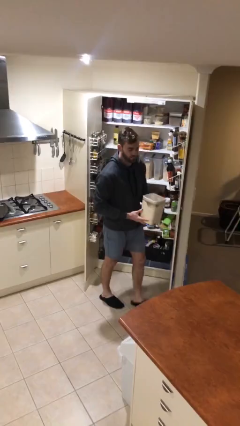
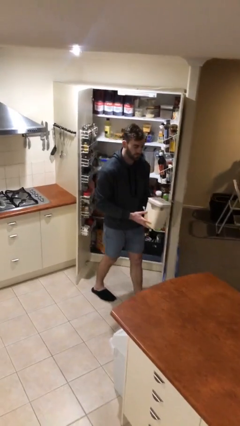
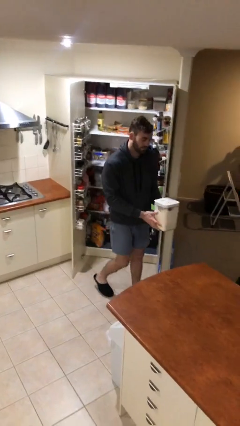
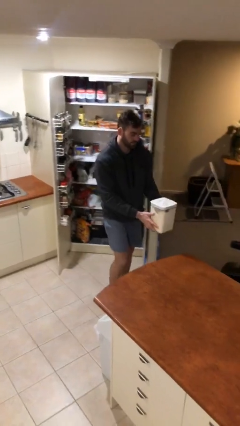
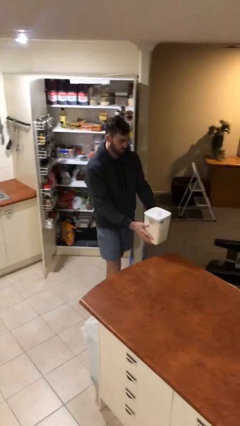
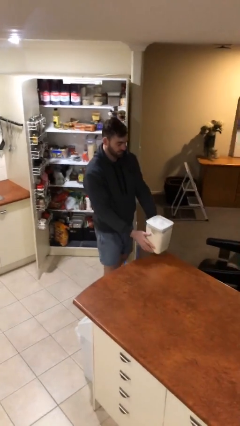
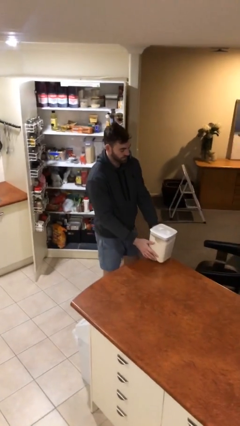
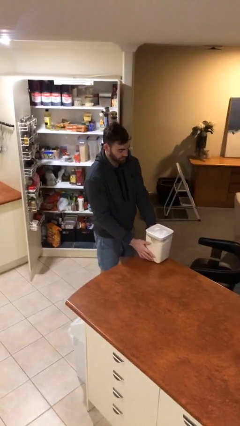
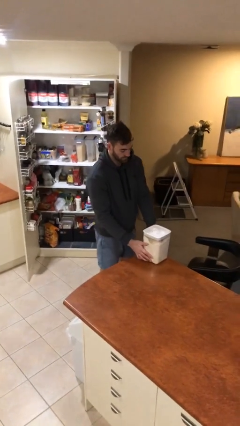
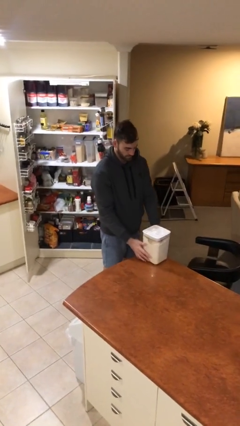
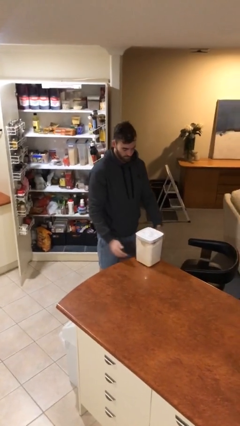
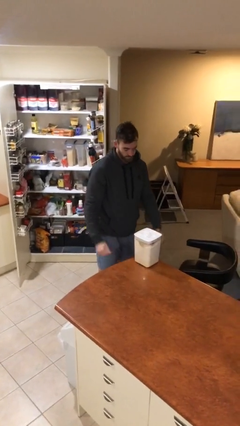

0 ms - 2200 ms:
person puts down object on table

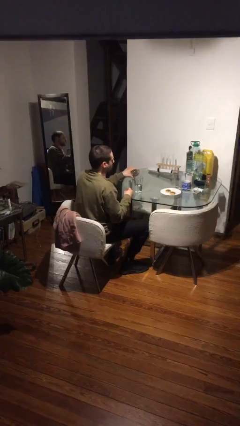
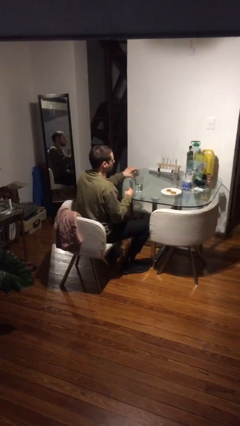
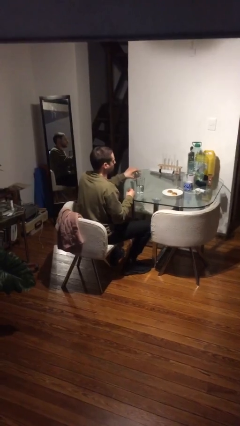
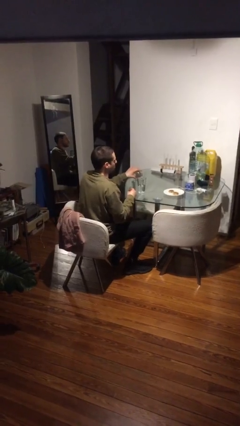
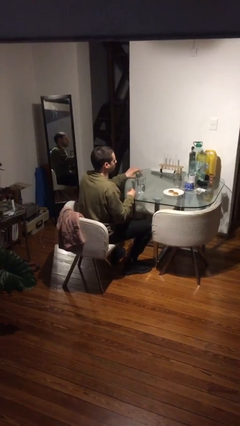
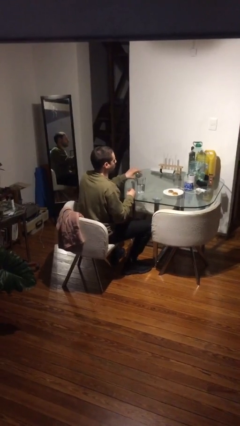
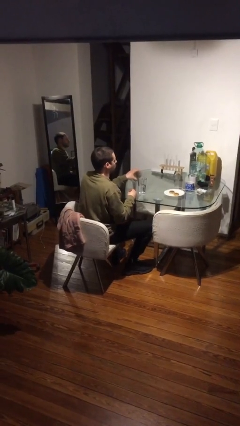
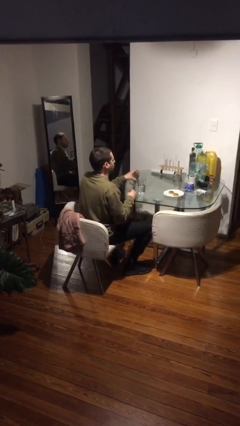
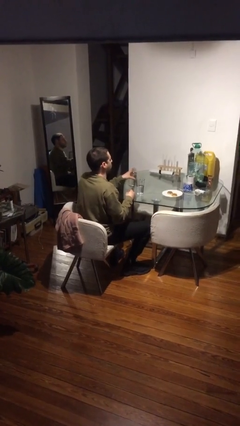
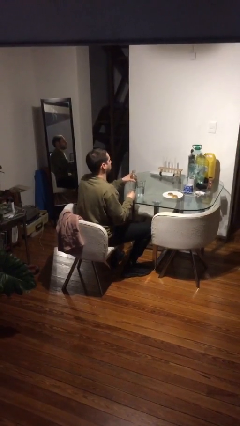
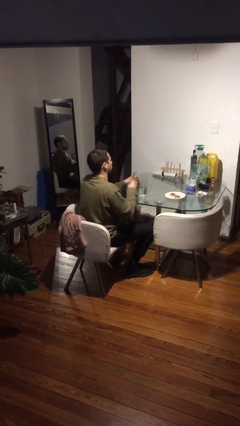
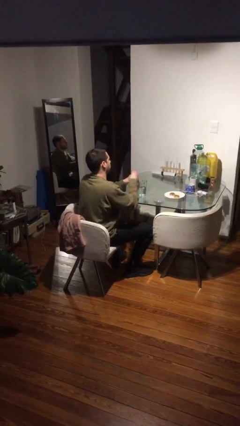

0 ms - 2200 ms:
person pours liquid into cup

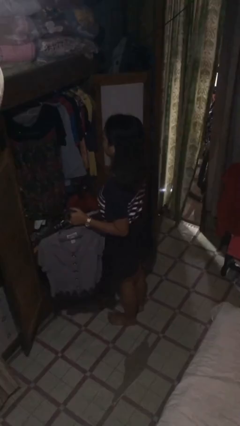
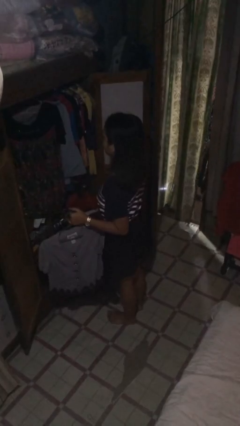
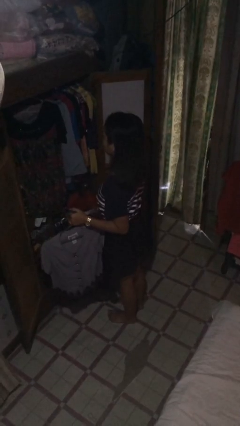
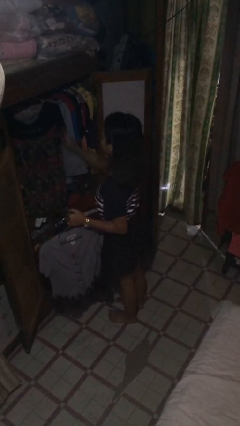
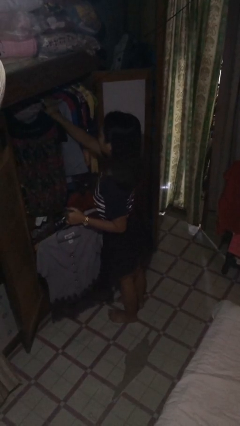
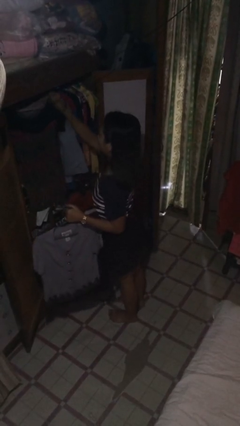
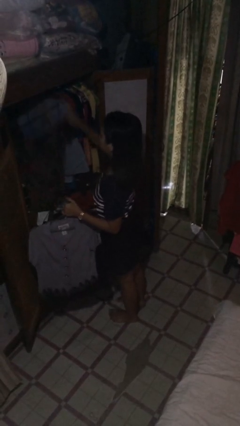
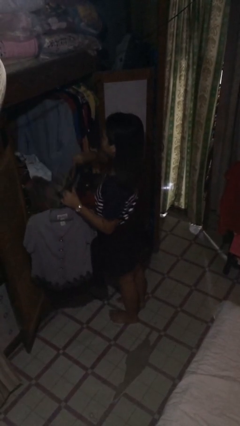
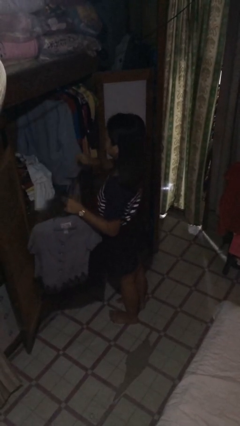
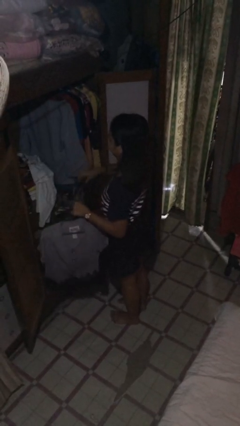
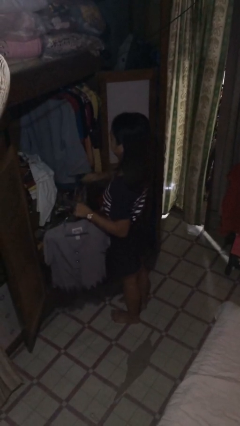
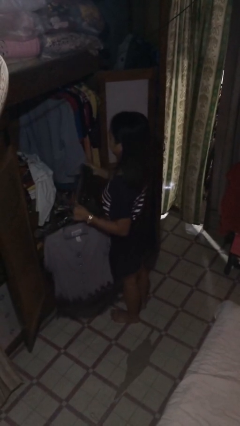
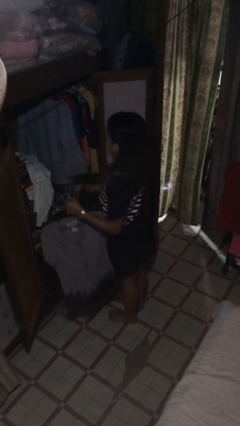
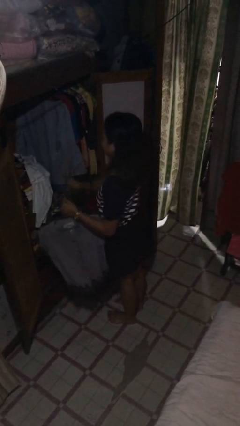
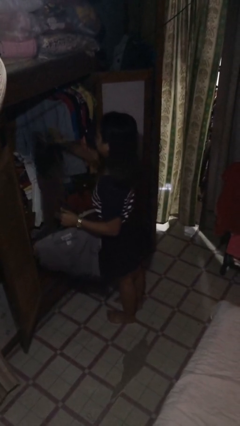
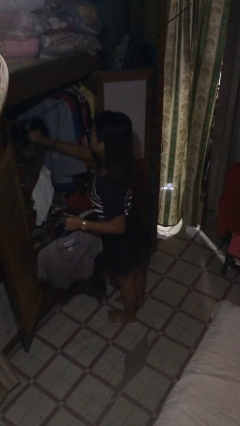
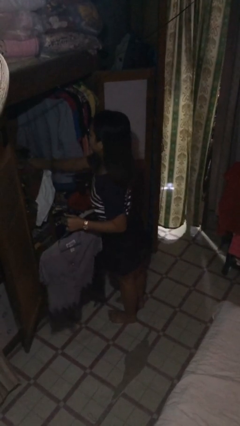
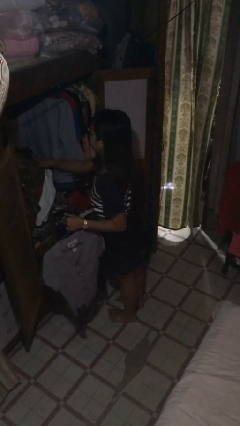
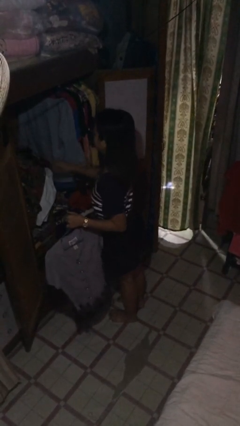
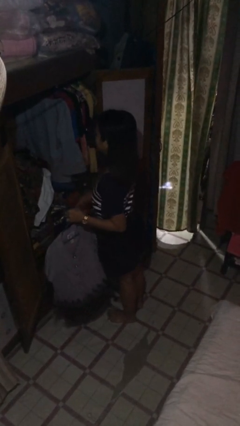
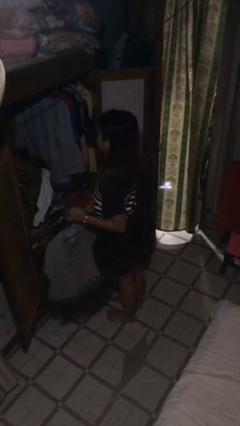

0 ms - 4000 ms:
person takes clothes from closet

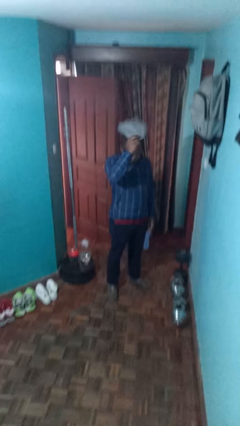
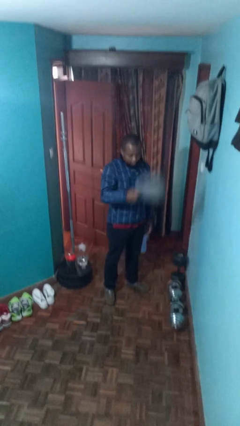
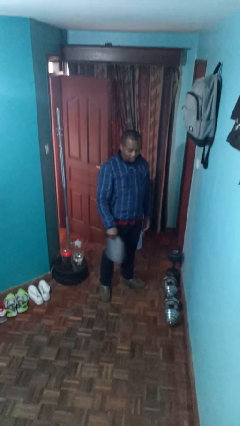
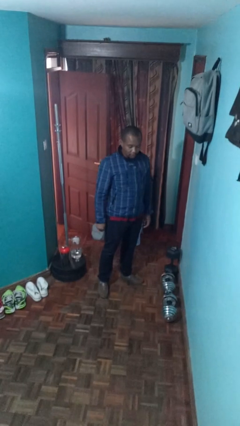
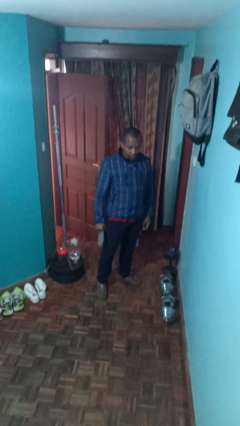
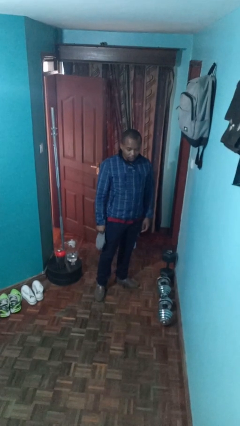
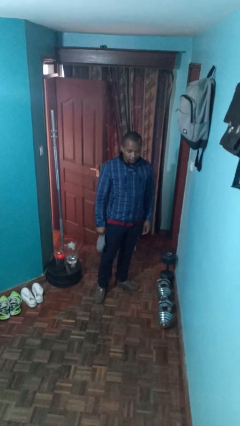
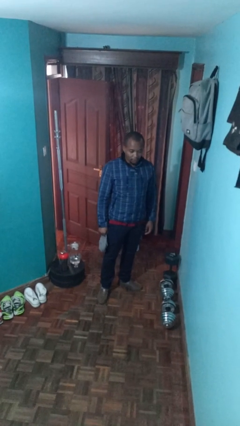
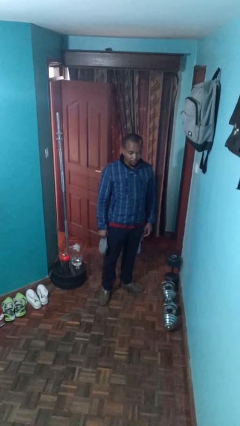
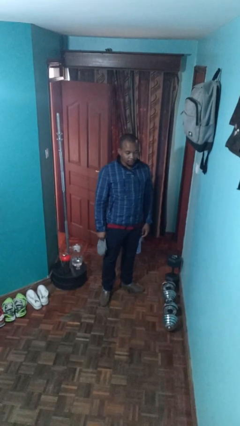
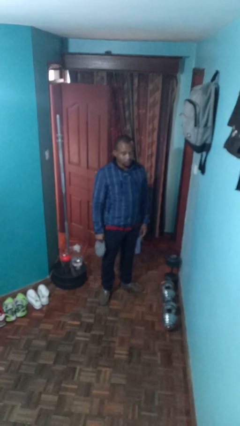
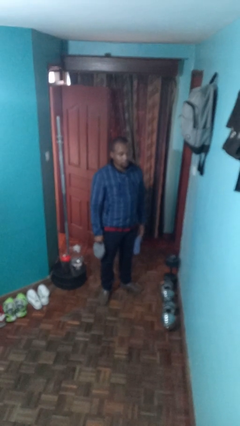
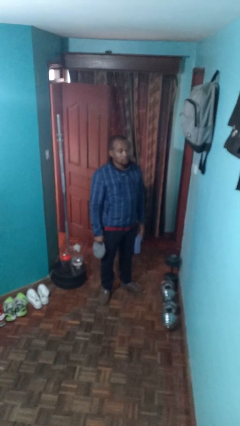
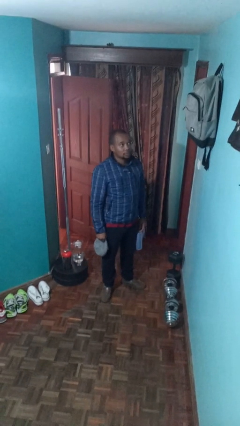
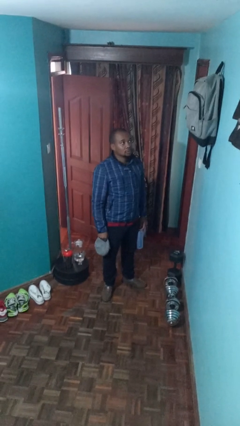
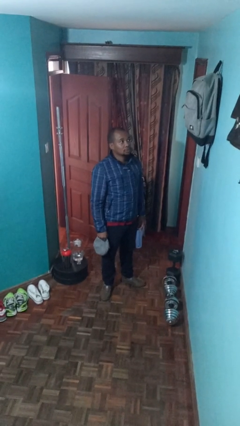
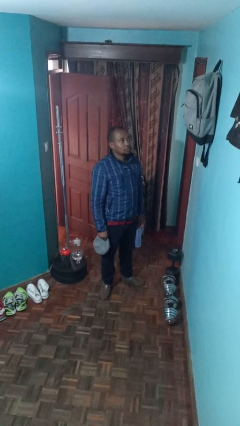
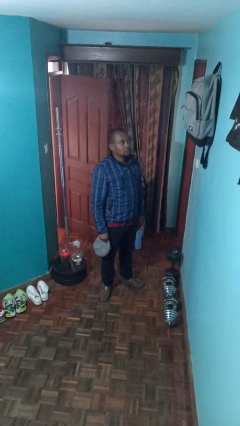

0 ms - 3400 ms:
person takes off hat

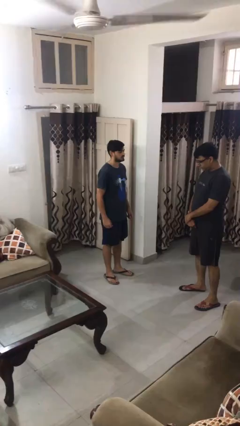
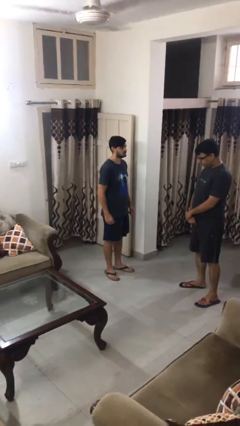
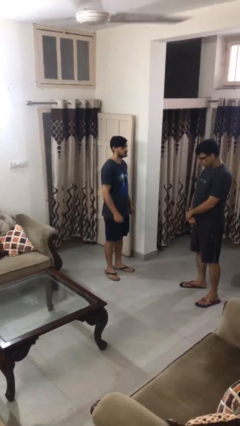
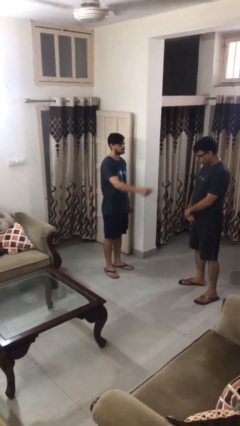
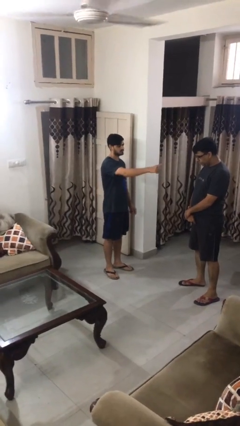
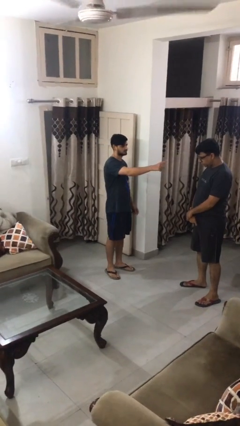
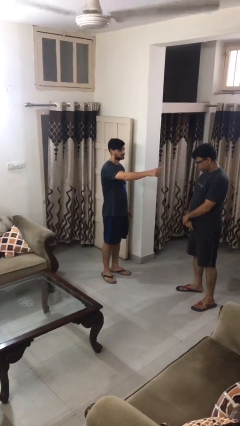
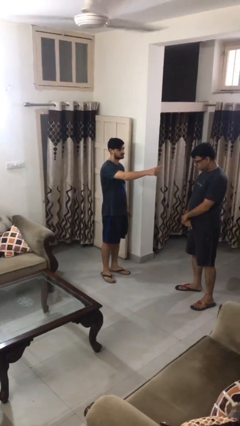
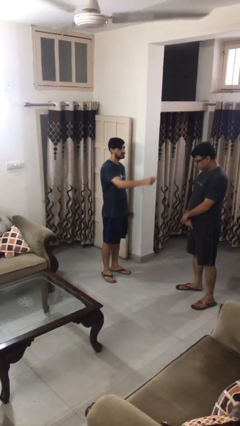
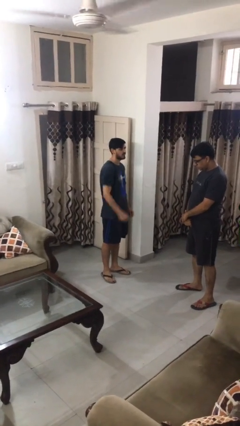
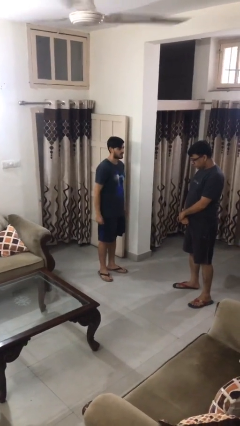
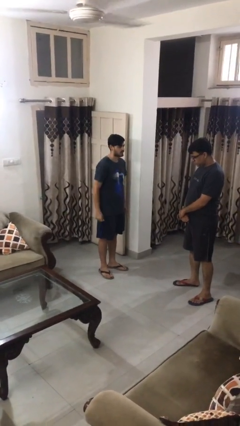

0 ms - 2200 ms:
person points at person

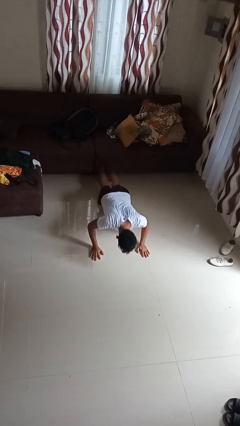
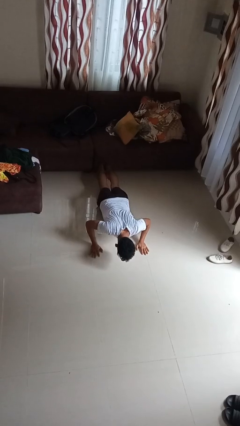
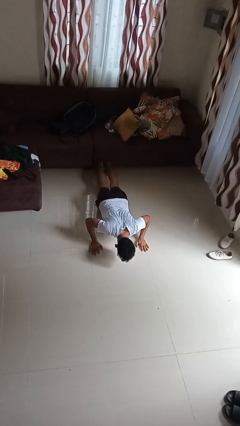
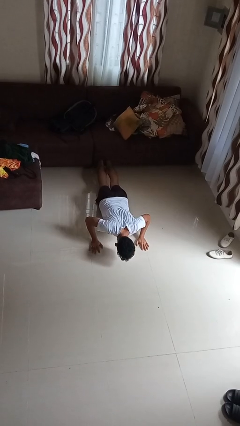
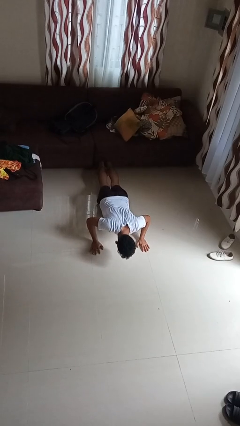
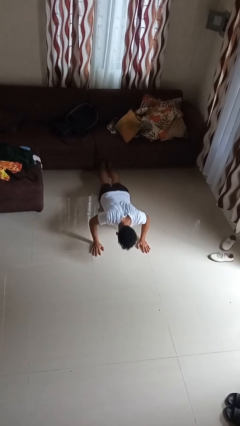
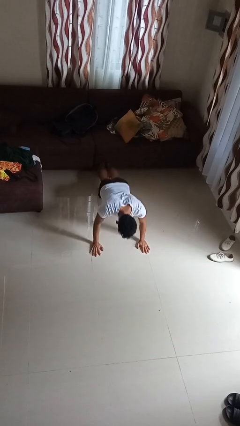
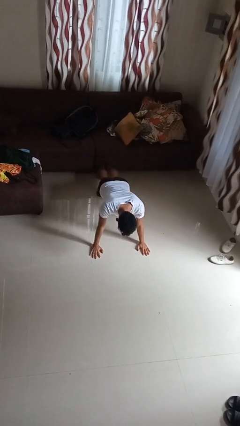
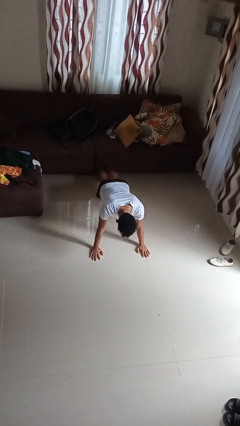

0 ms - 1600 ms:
person exercises with pushup

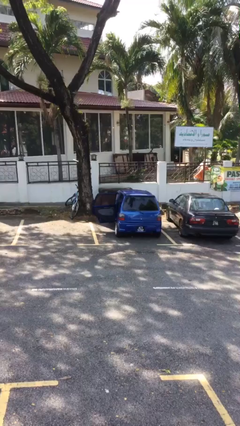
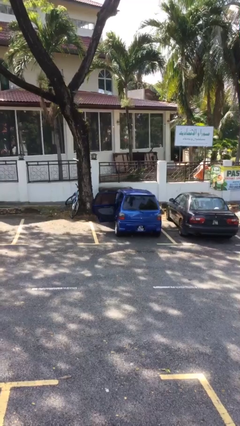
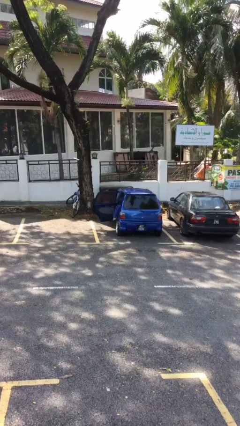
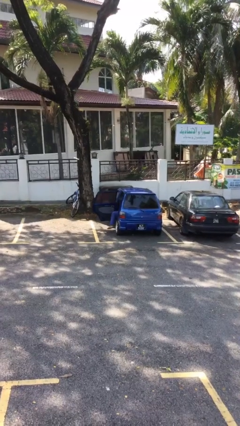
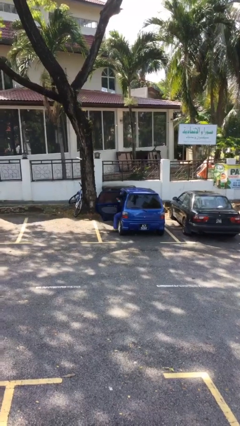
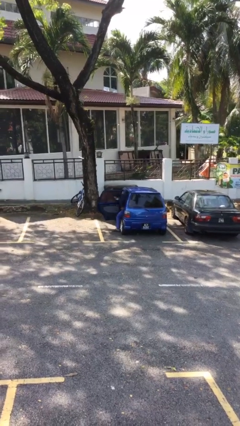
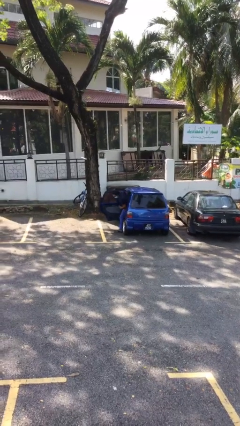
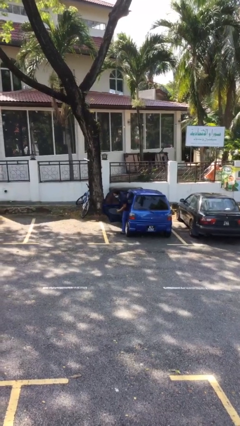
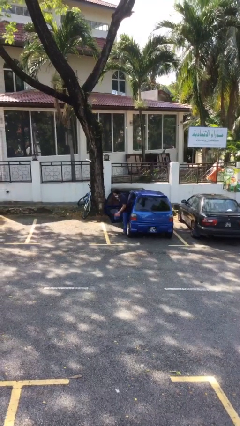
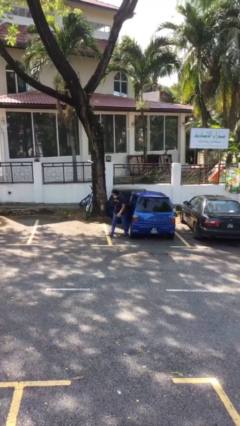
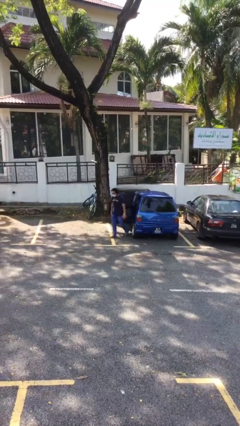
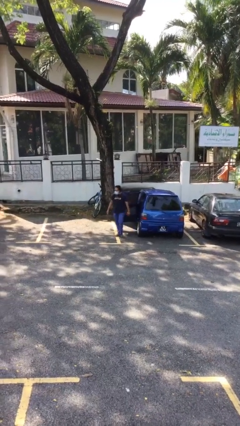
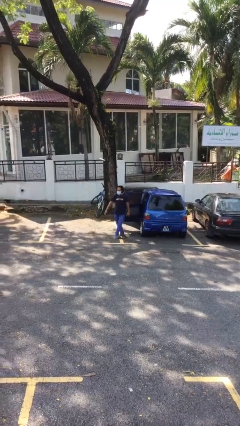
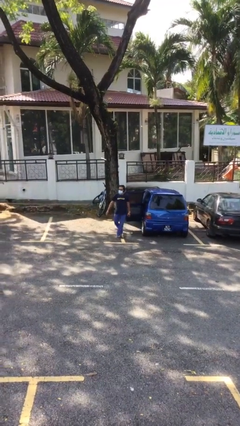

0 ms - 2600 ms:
person exits car
